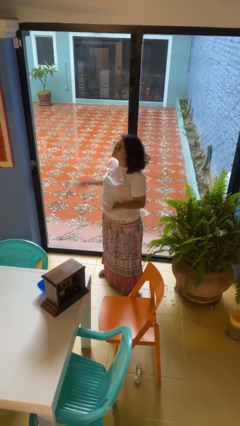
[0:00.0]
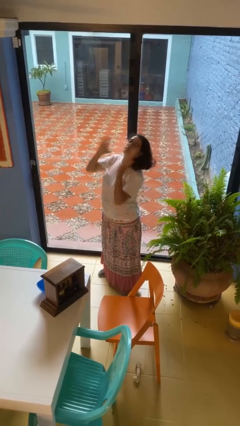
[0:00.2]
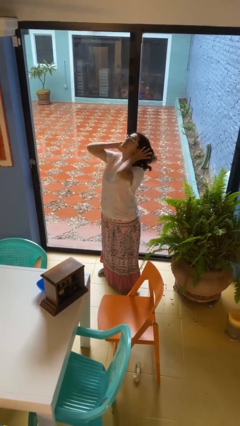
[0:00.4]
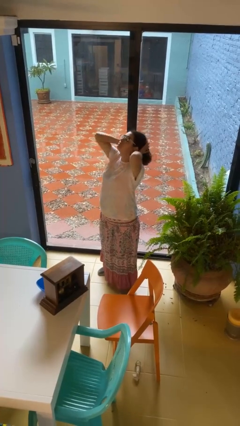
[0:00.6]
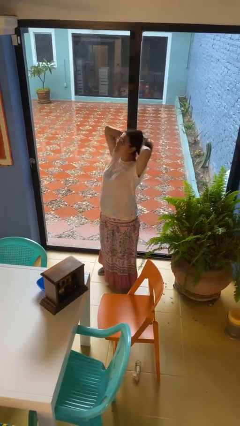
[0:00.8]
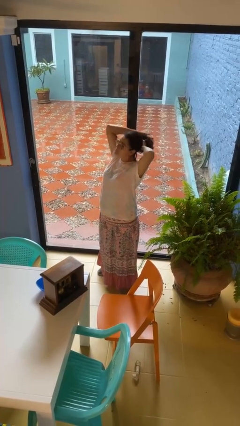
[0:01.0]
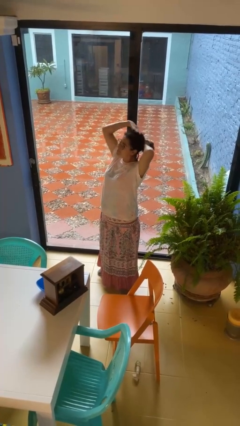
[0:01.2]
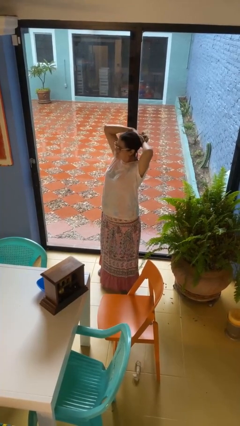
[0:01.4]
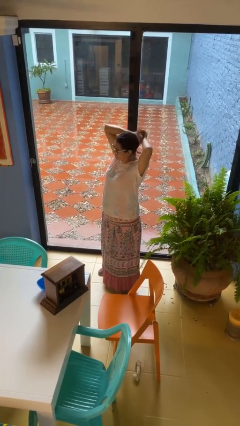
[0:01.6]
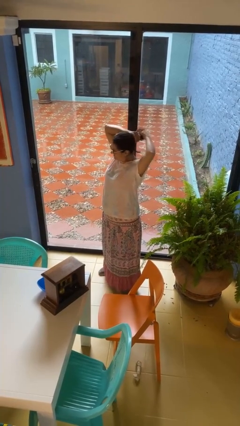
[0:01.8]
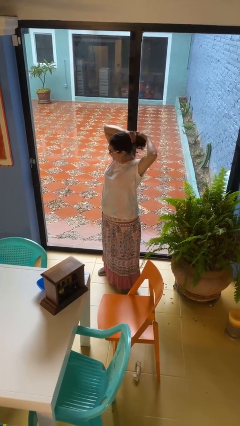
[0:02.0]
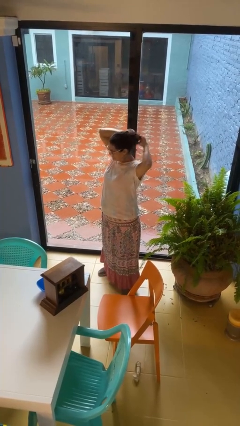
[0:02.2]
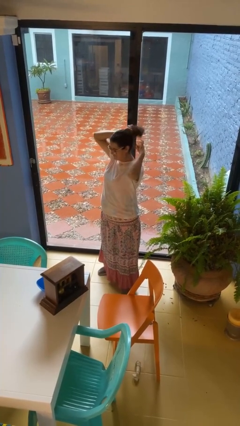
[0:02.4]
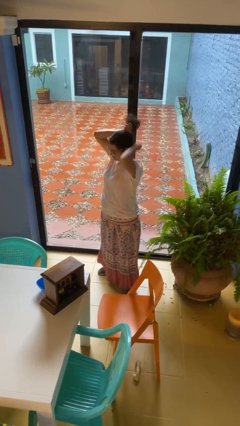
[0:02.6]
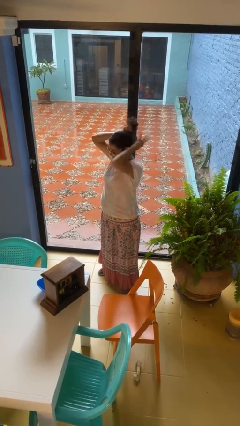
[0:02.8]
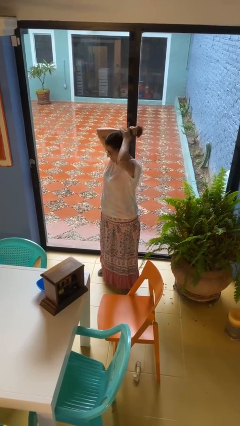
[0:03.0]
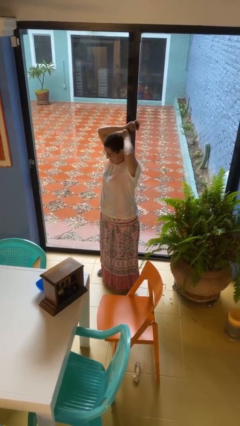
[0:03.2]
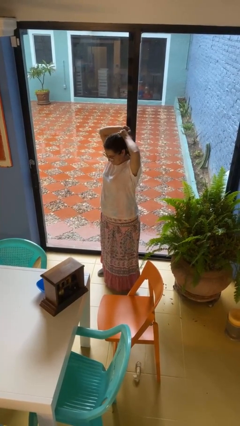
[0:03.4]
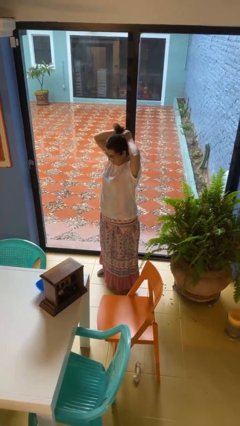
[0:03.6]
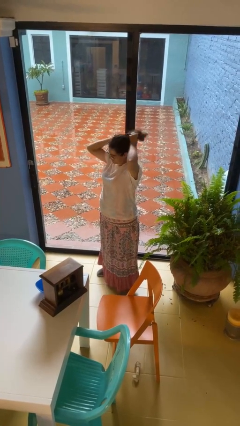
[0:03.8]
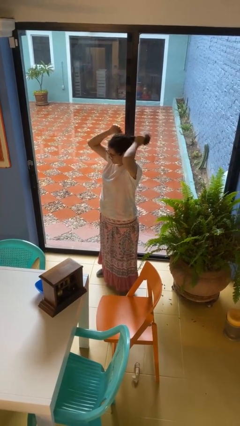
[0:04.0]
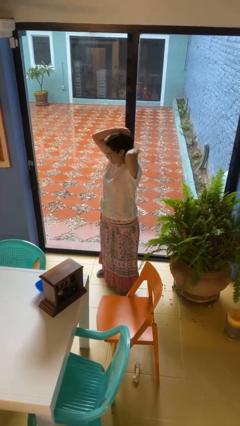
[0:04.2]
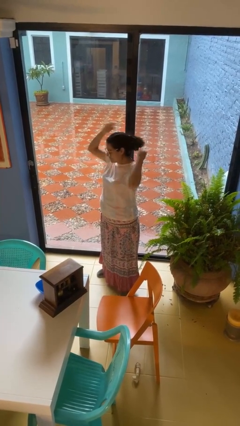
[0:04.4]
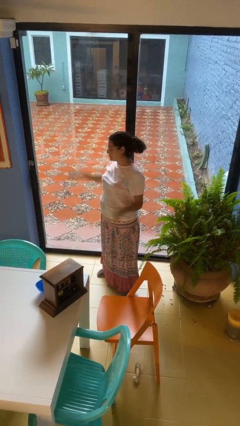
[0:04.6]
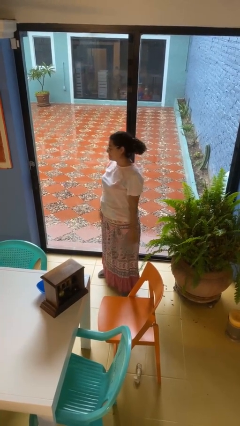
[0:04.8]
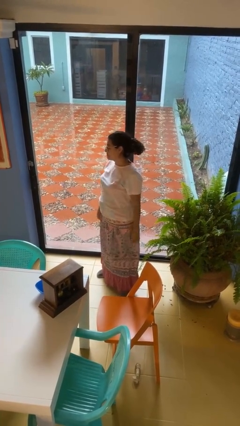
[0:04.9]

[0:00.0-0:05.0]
person puts hair in ponytail

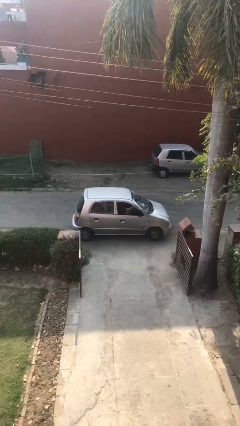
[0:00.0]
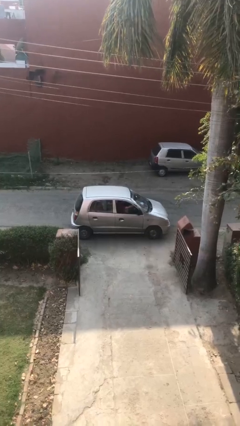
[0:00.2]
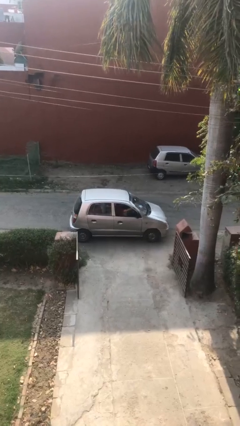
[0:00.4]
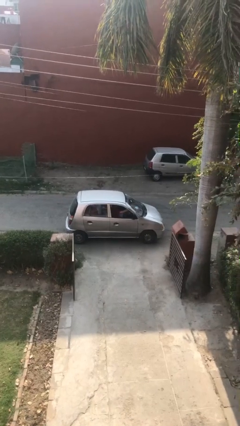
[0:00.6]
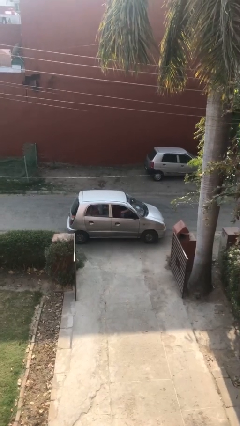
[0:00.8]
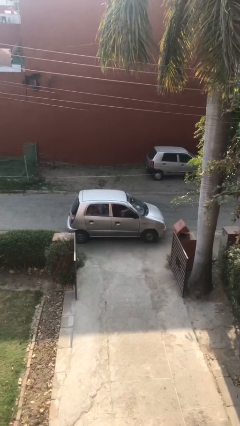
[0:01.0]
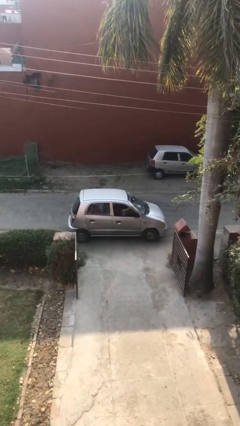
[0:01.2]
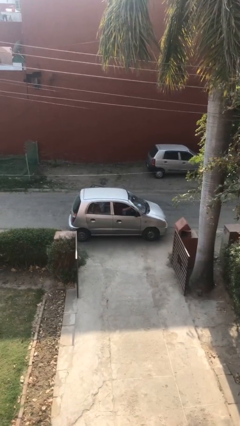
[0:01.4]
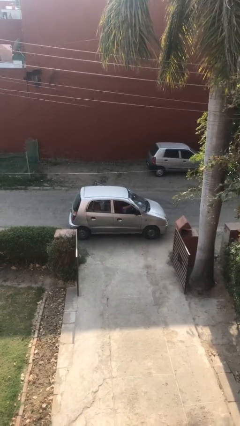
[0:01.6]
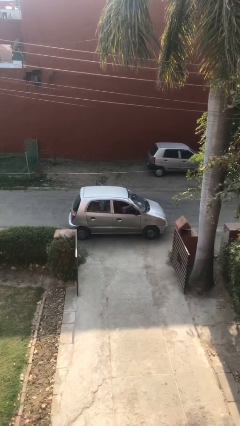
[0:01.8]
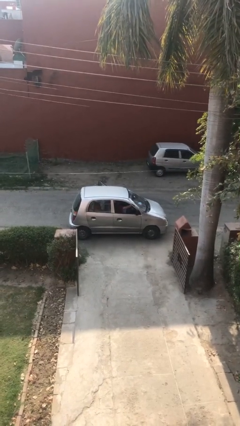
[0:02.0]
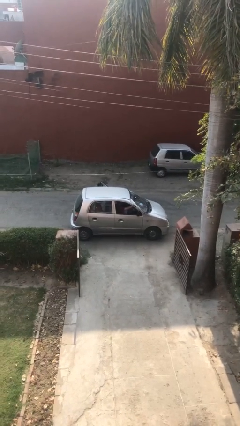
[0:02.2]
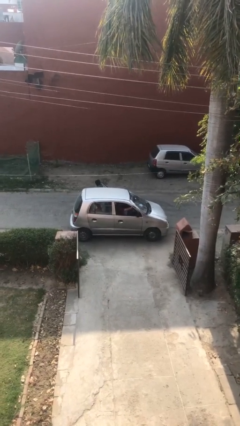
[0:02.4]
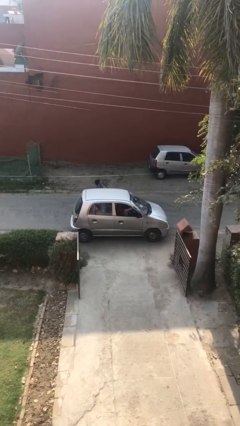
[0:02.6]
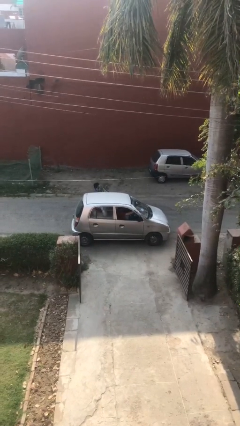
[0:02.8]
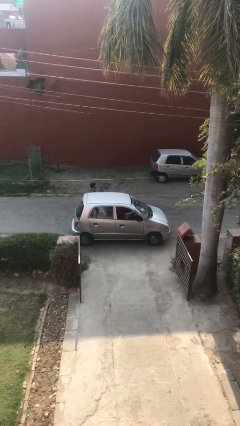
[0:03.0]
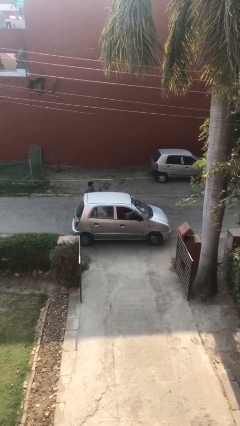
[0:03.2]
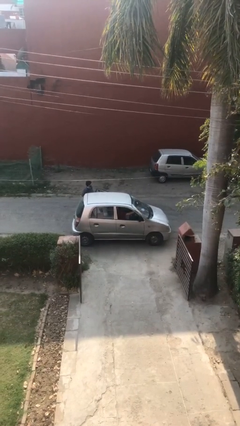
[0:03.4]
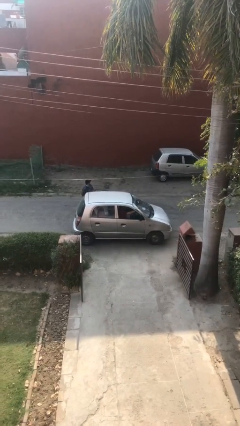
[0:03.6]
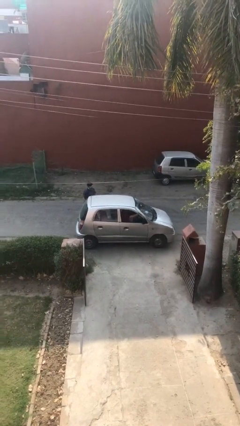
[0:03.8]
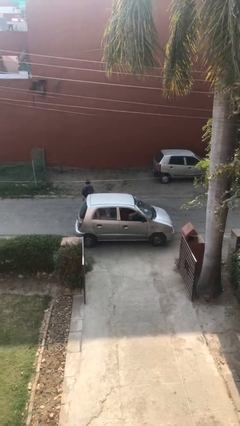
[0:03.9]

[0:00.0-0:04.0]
car drops off person

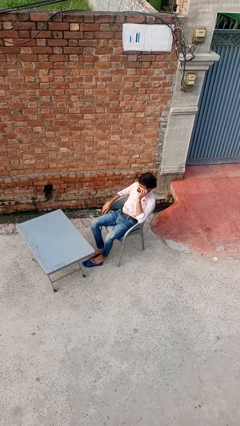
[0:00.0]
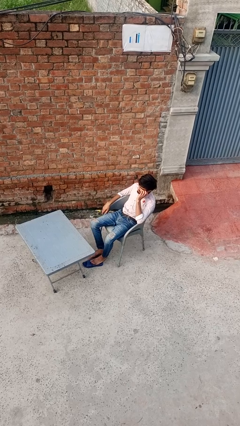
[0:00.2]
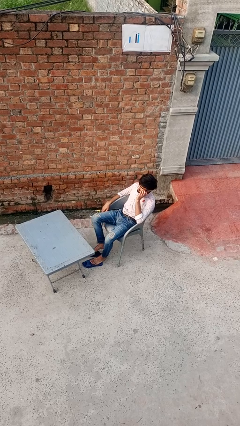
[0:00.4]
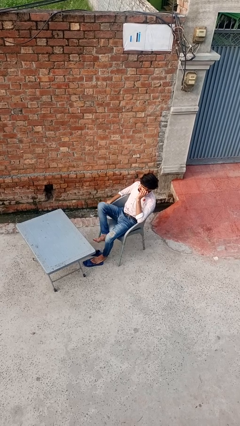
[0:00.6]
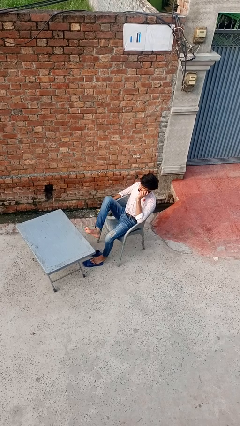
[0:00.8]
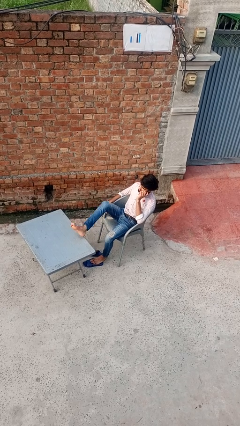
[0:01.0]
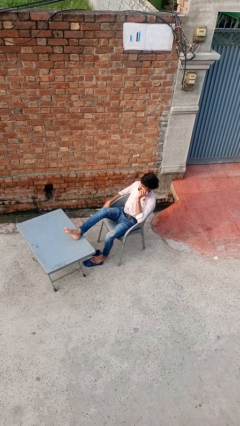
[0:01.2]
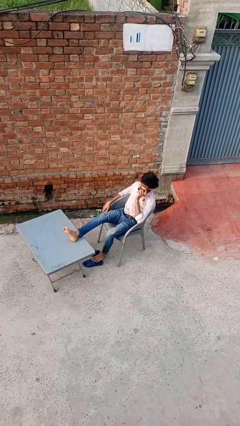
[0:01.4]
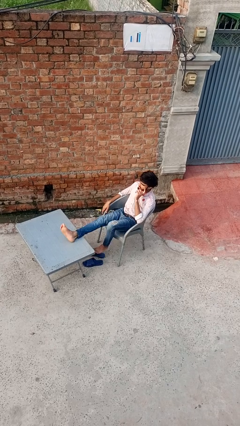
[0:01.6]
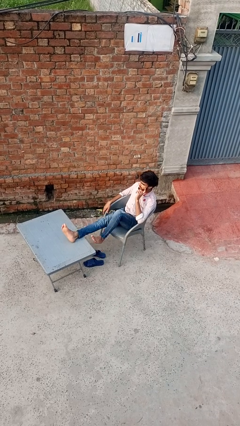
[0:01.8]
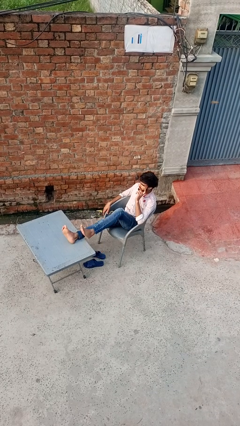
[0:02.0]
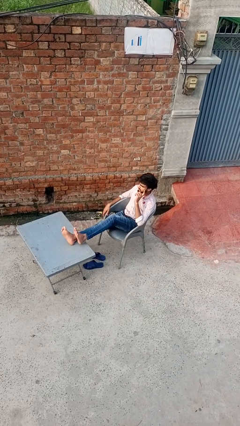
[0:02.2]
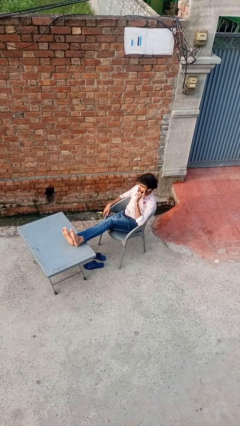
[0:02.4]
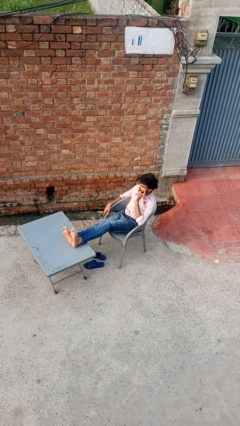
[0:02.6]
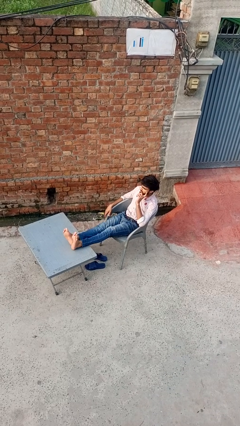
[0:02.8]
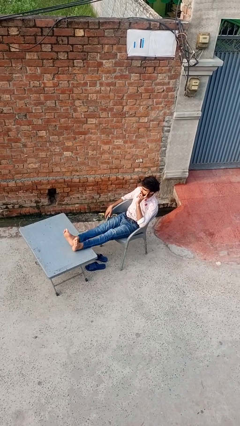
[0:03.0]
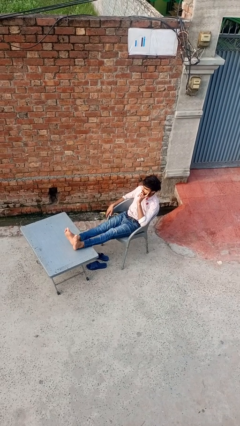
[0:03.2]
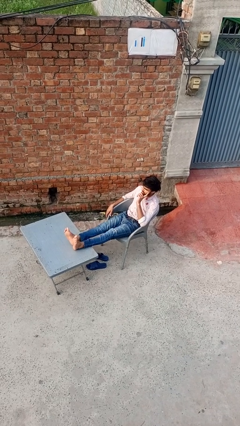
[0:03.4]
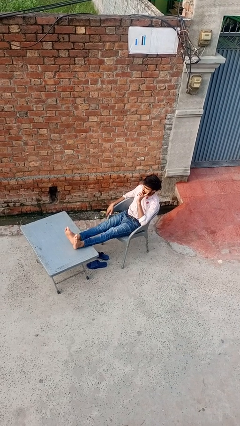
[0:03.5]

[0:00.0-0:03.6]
person puts feet up

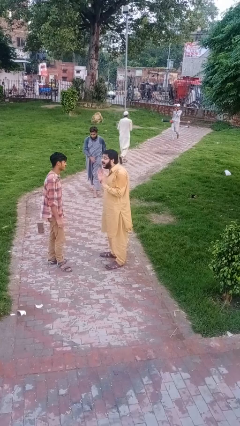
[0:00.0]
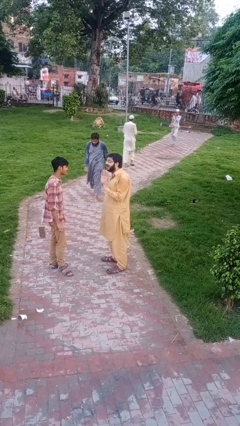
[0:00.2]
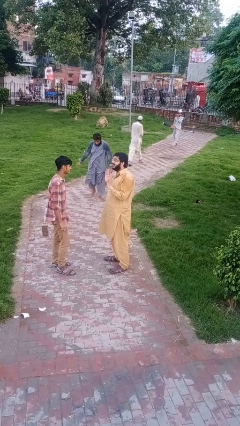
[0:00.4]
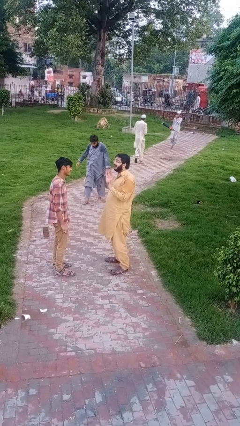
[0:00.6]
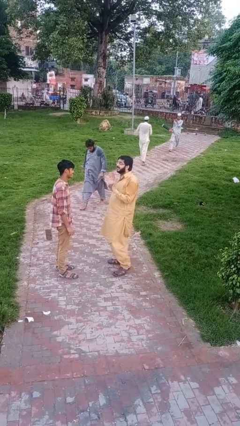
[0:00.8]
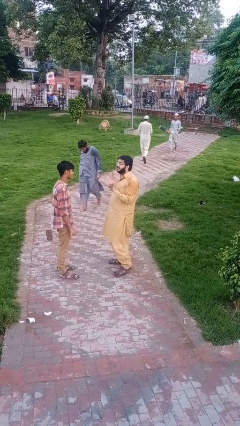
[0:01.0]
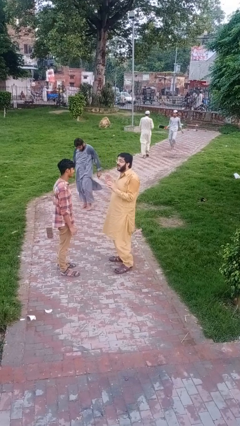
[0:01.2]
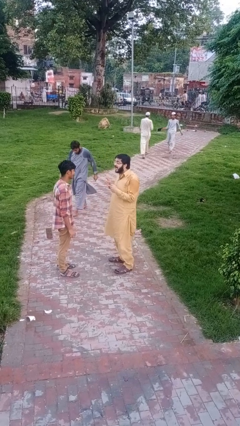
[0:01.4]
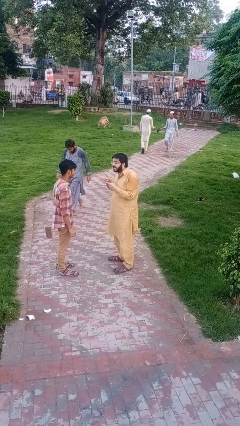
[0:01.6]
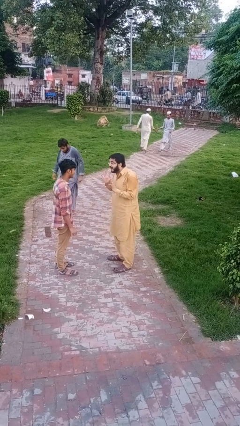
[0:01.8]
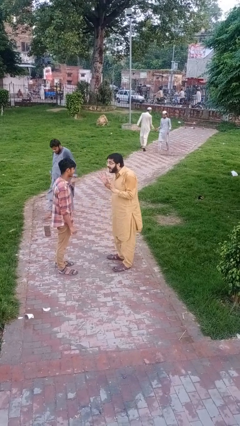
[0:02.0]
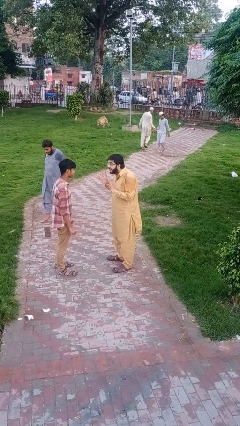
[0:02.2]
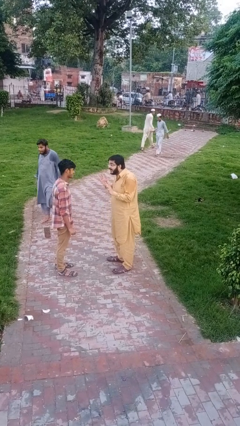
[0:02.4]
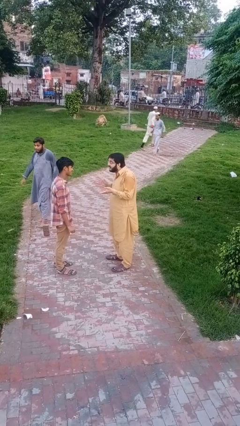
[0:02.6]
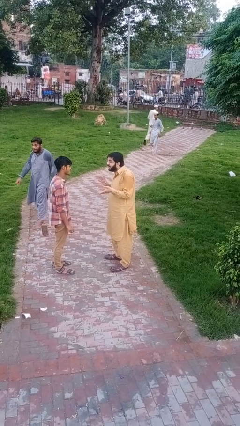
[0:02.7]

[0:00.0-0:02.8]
person talks to person

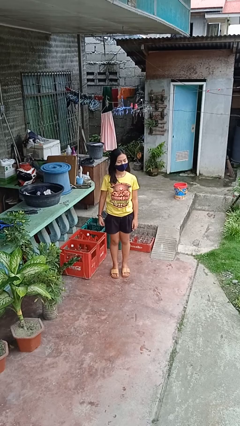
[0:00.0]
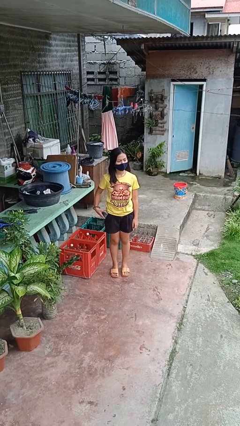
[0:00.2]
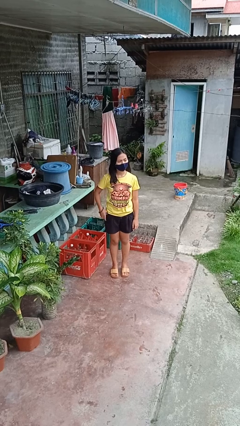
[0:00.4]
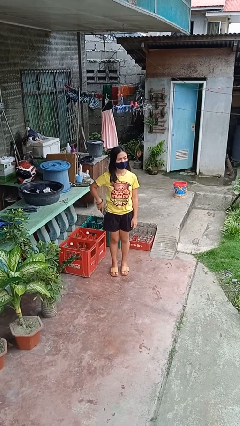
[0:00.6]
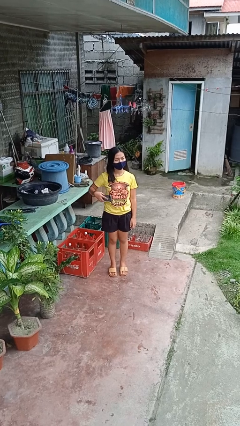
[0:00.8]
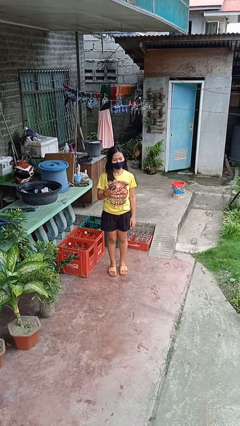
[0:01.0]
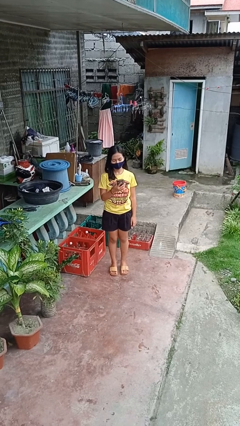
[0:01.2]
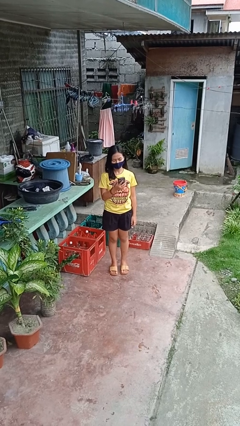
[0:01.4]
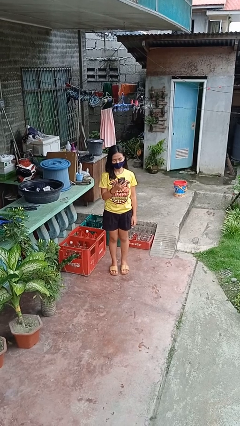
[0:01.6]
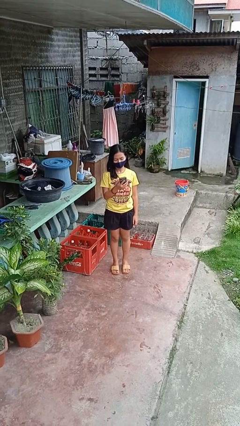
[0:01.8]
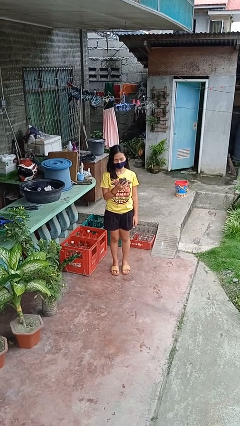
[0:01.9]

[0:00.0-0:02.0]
person takes phone from pocket

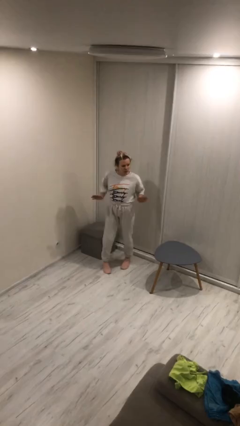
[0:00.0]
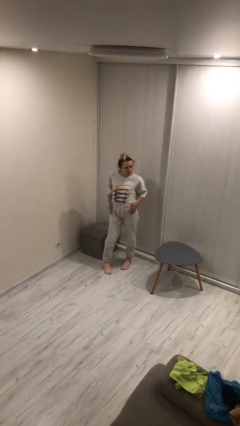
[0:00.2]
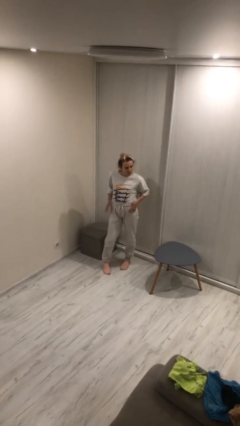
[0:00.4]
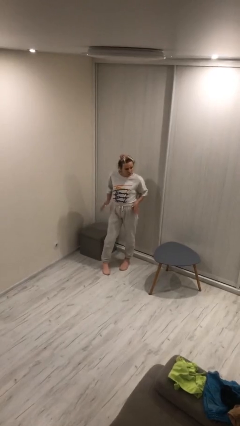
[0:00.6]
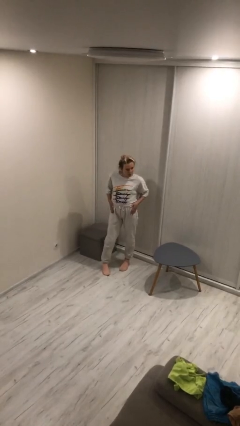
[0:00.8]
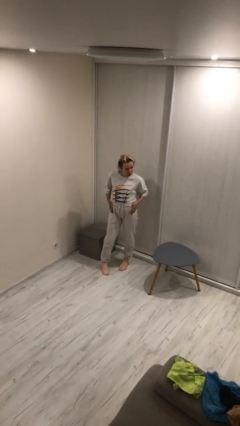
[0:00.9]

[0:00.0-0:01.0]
person slaps hands on thighs
